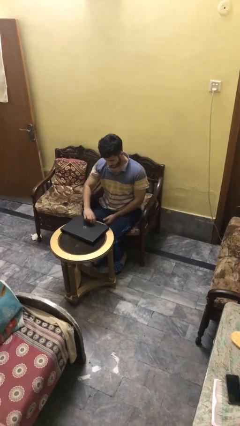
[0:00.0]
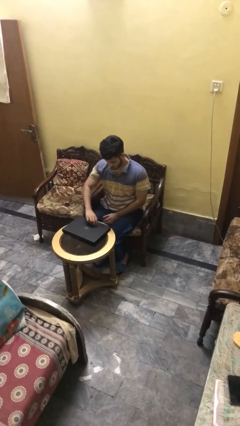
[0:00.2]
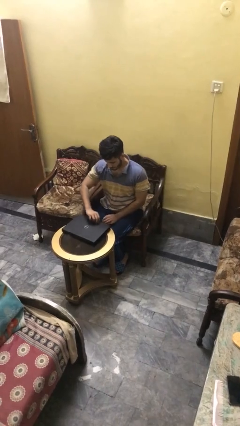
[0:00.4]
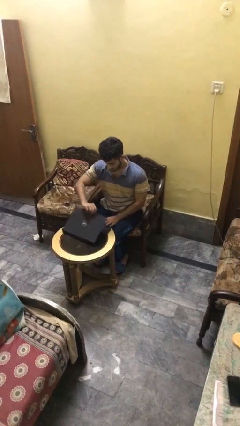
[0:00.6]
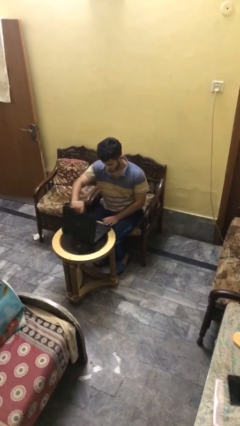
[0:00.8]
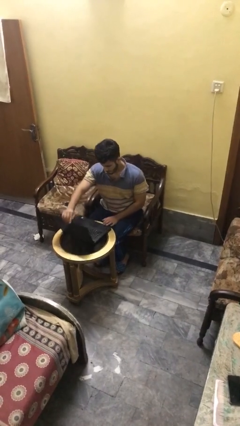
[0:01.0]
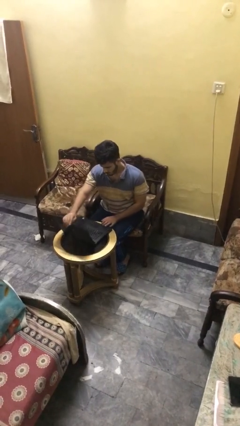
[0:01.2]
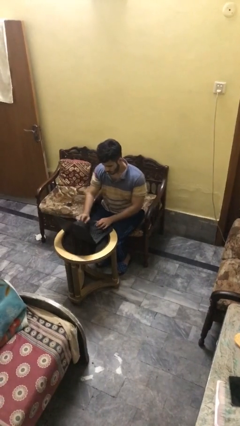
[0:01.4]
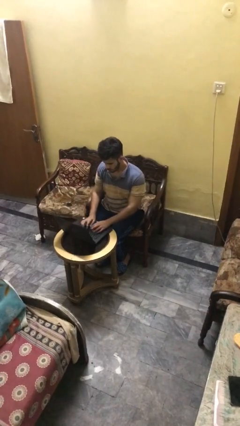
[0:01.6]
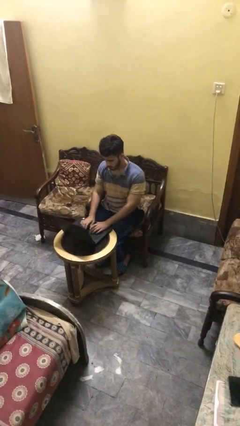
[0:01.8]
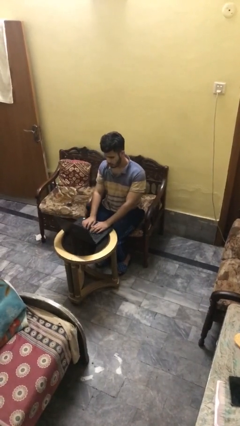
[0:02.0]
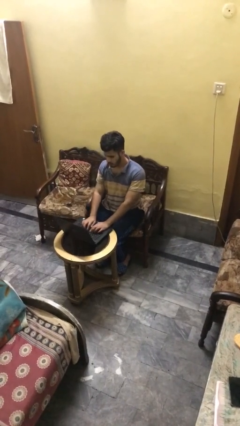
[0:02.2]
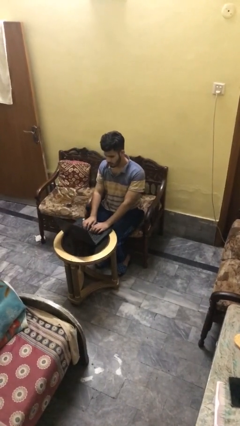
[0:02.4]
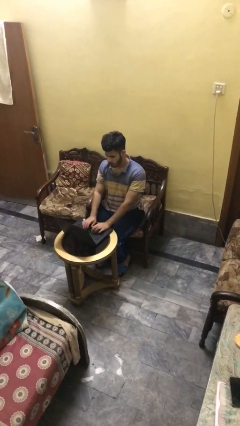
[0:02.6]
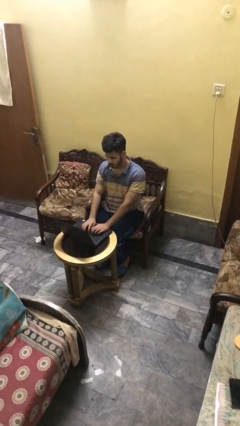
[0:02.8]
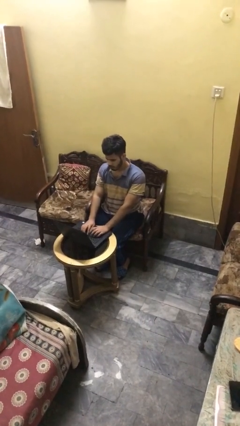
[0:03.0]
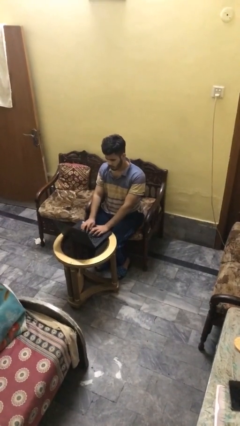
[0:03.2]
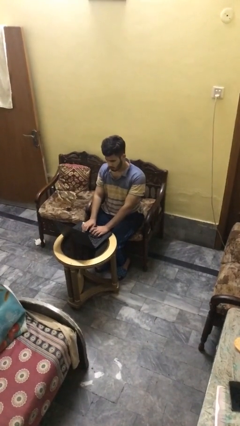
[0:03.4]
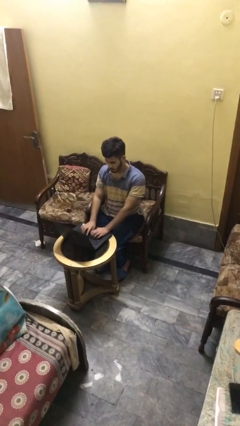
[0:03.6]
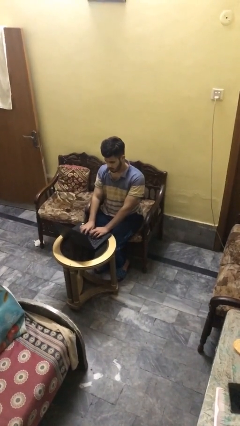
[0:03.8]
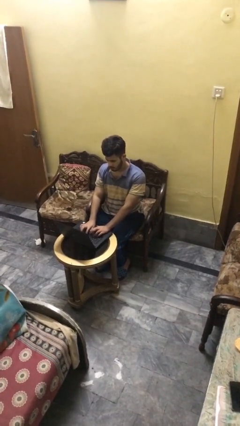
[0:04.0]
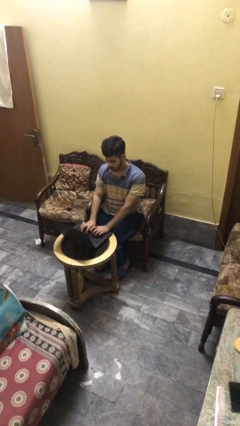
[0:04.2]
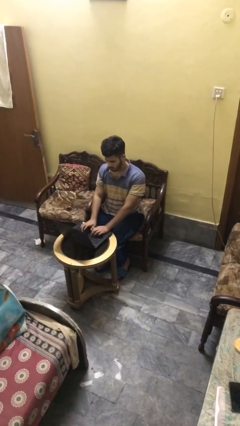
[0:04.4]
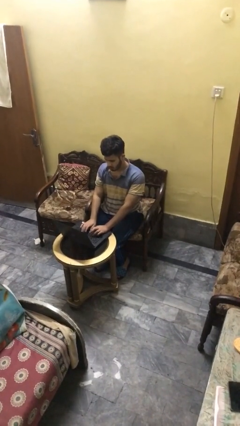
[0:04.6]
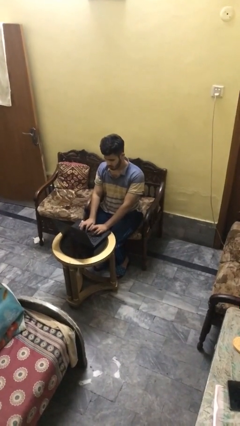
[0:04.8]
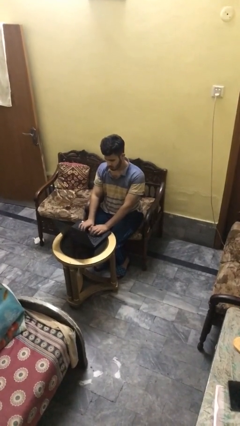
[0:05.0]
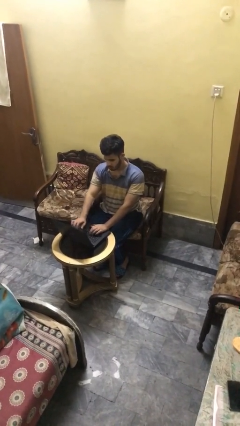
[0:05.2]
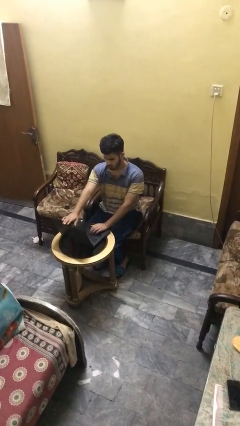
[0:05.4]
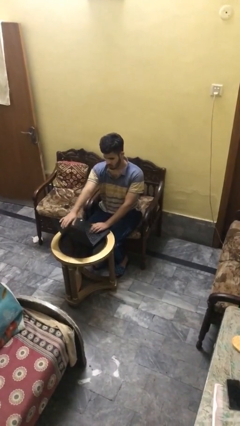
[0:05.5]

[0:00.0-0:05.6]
person interacts with laptop

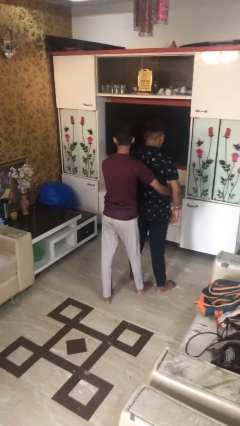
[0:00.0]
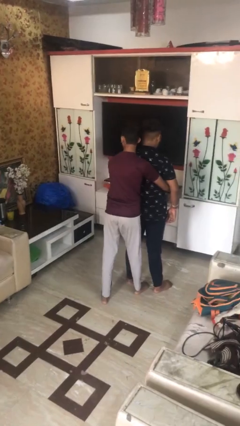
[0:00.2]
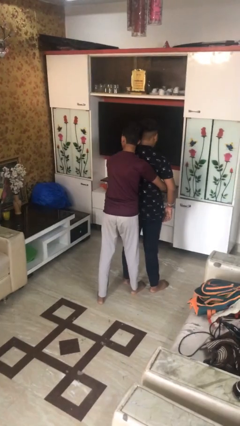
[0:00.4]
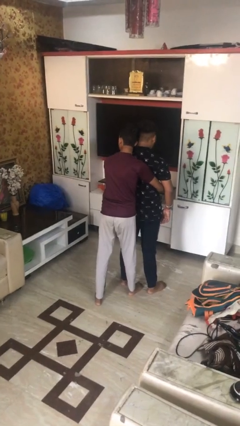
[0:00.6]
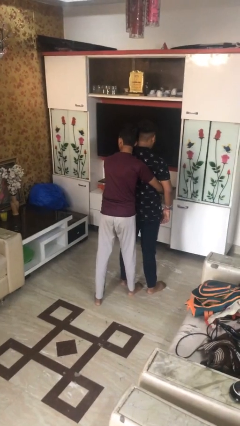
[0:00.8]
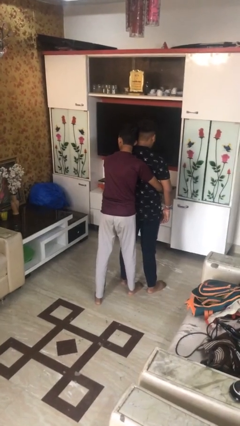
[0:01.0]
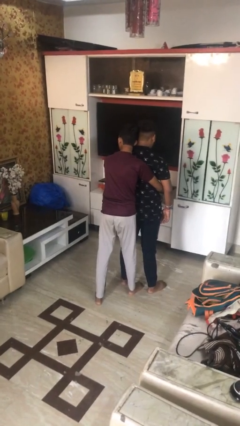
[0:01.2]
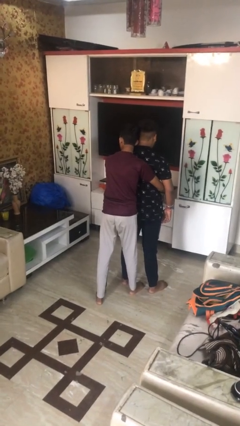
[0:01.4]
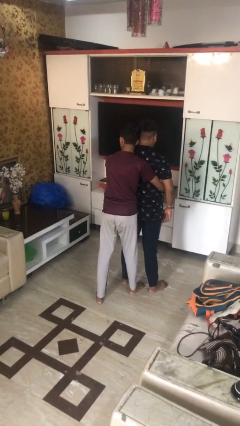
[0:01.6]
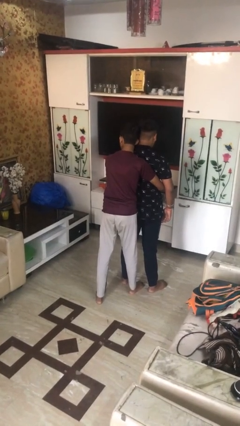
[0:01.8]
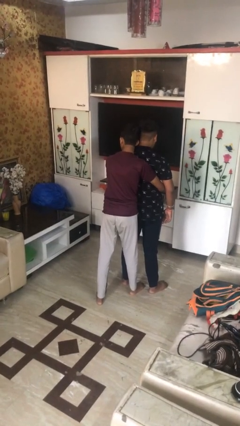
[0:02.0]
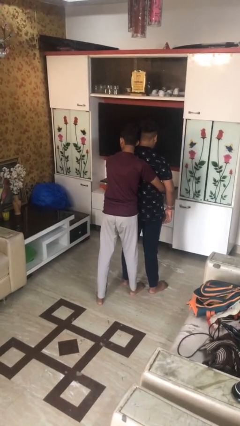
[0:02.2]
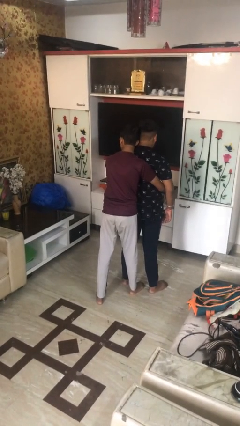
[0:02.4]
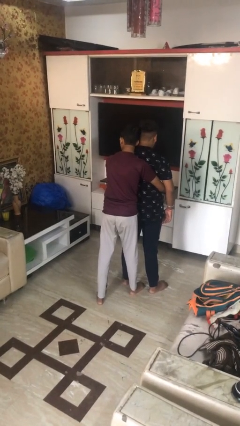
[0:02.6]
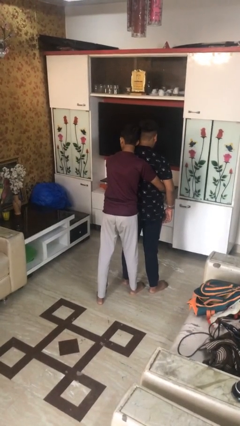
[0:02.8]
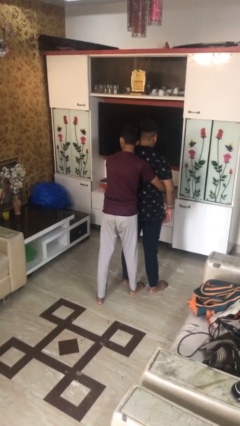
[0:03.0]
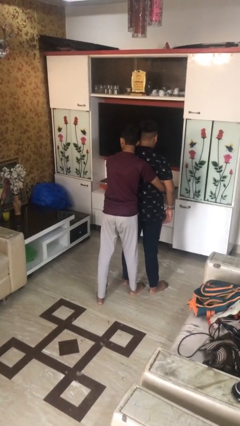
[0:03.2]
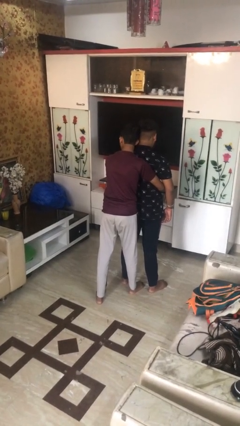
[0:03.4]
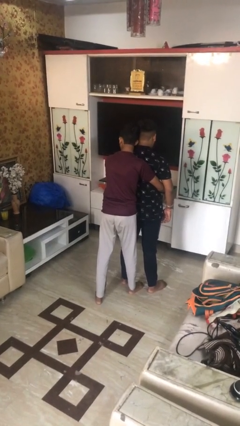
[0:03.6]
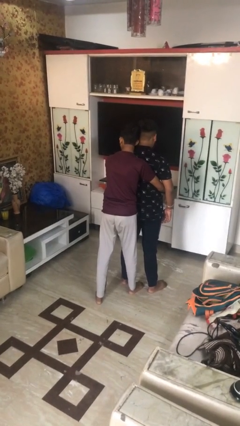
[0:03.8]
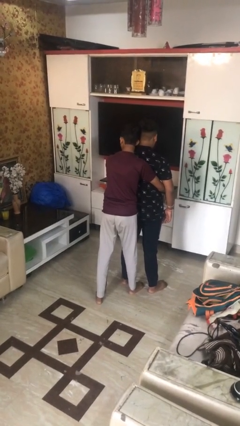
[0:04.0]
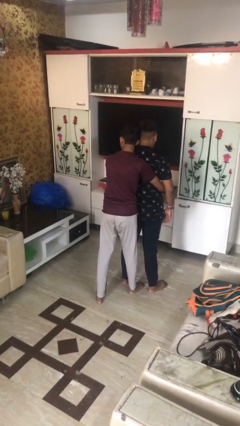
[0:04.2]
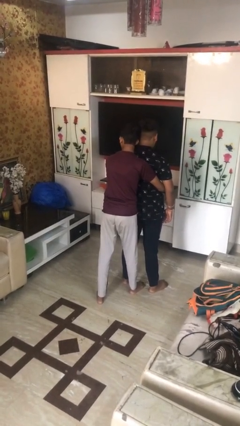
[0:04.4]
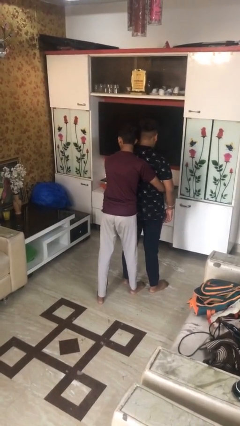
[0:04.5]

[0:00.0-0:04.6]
person hugs person from behind

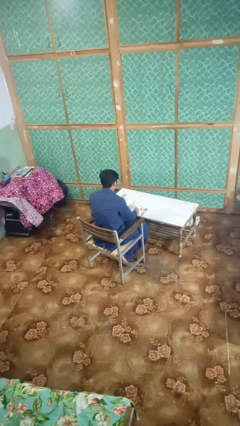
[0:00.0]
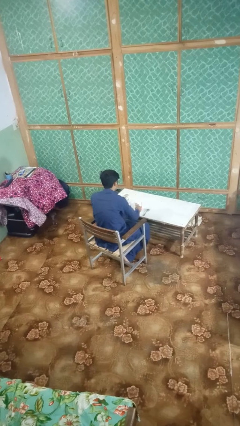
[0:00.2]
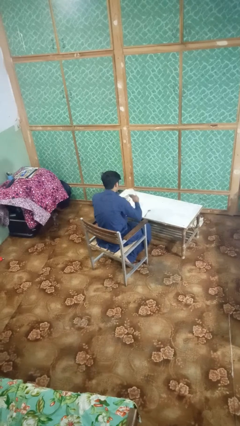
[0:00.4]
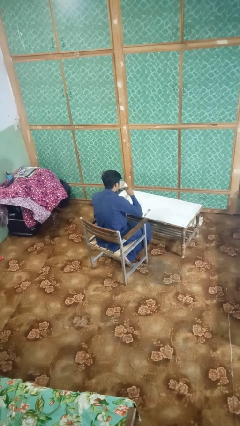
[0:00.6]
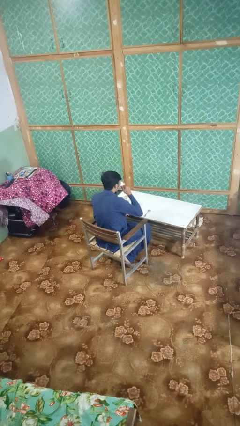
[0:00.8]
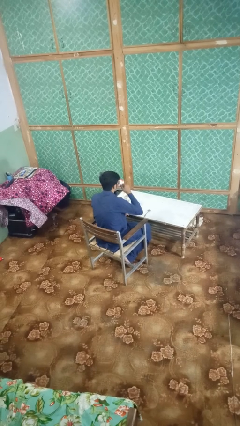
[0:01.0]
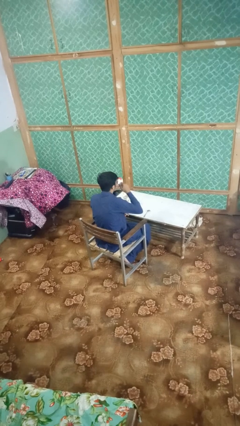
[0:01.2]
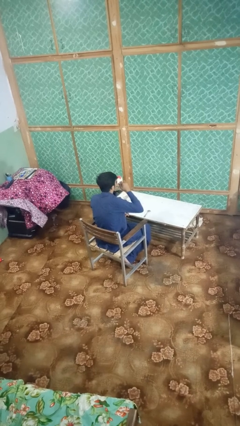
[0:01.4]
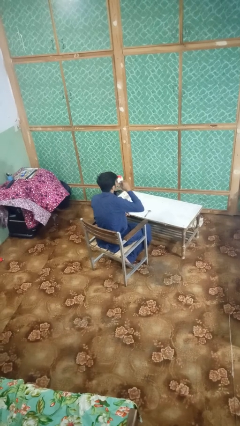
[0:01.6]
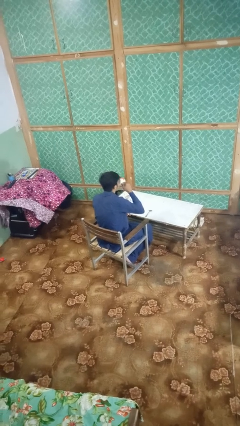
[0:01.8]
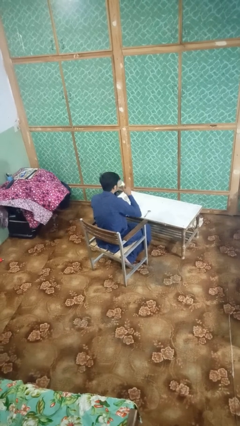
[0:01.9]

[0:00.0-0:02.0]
person drinks from mug

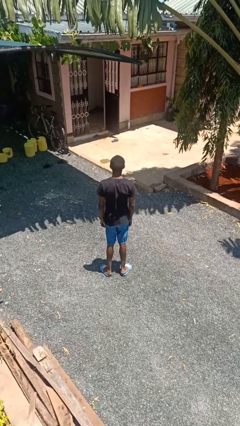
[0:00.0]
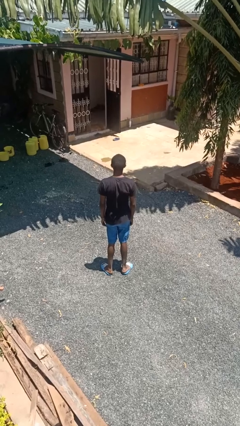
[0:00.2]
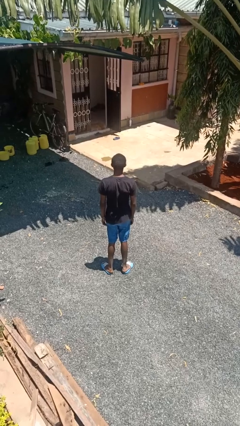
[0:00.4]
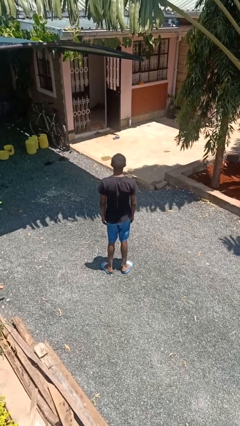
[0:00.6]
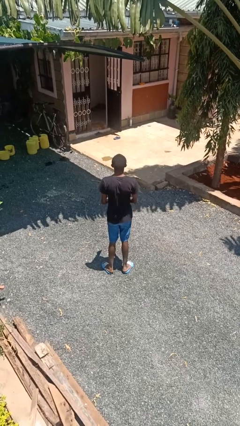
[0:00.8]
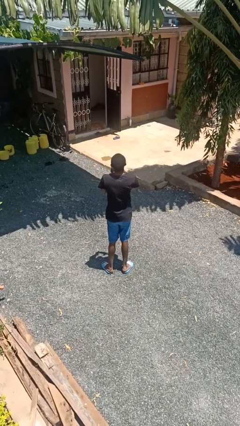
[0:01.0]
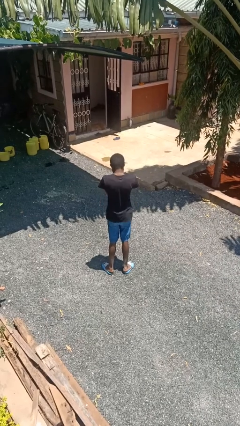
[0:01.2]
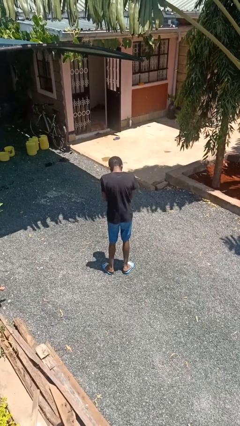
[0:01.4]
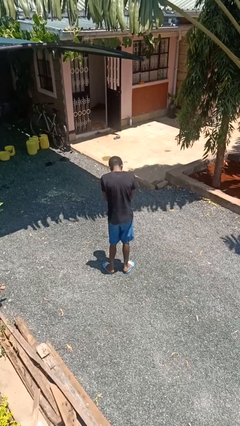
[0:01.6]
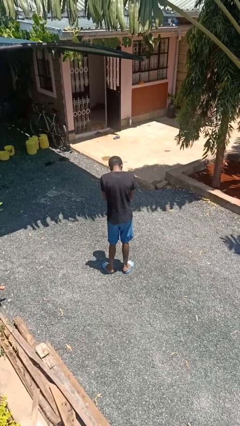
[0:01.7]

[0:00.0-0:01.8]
person sneezes into hand

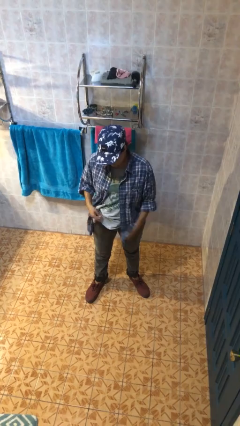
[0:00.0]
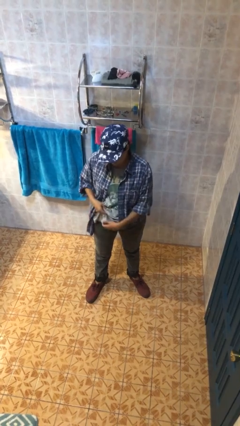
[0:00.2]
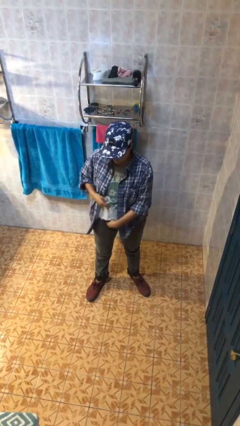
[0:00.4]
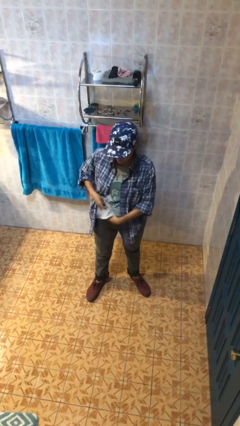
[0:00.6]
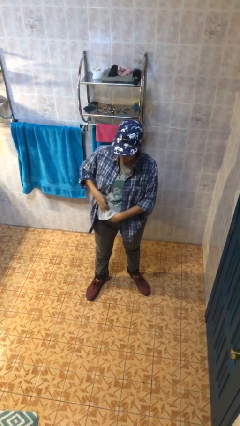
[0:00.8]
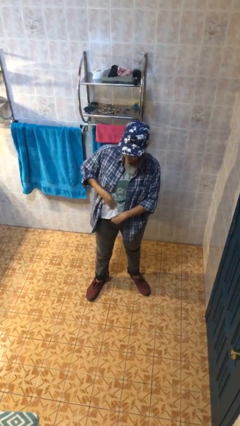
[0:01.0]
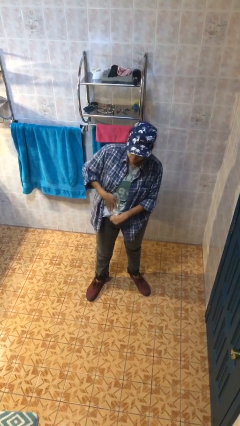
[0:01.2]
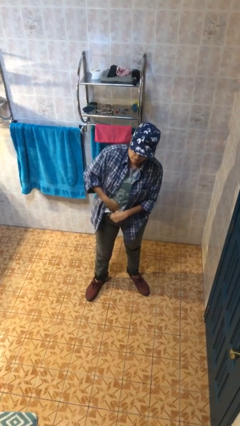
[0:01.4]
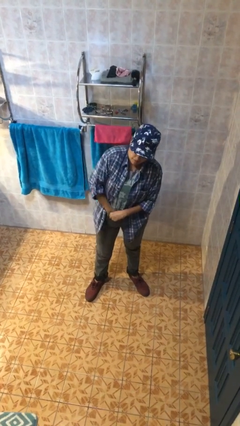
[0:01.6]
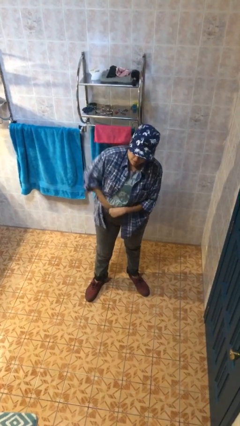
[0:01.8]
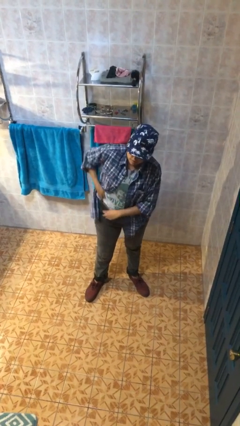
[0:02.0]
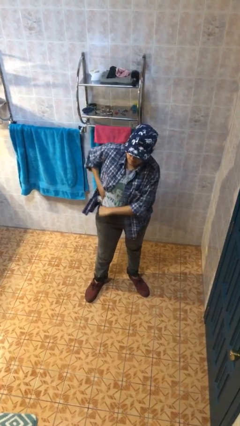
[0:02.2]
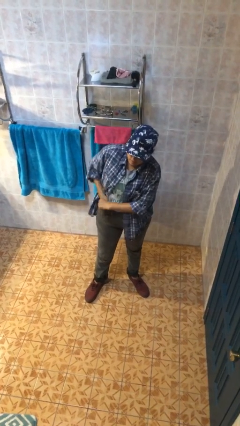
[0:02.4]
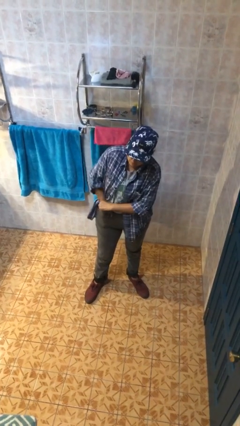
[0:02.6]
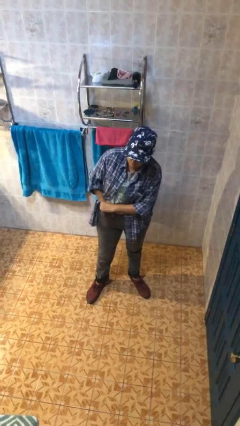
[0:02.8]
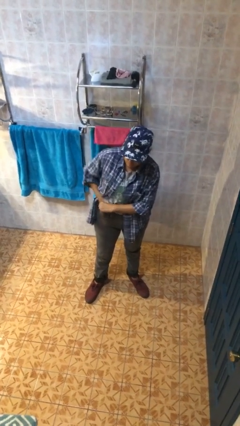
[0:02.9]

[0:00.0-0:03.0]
person tucks in shirt

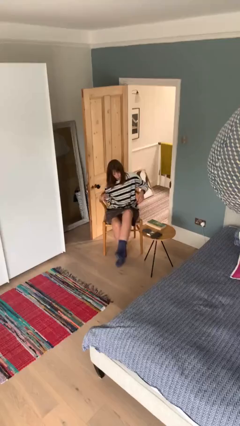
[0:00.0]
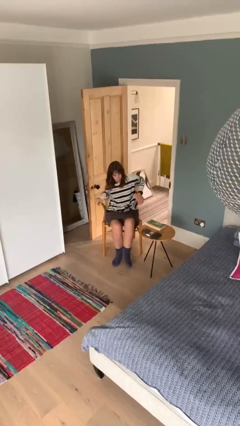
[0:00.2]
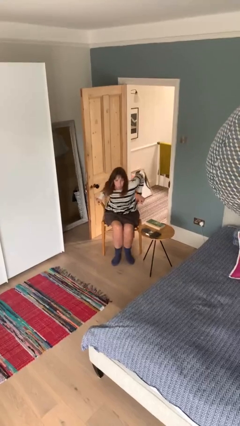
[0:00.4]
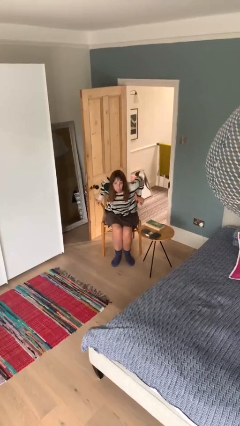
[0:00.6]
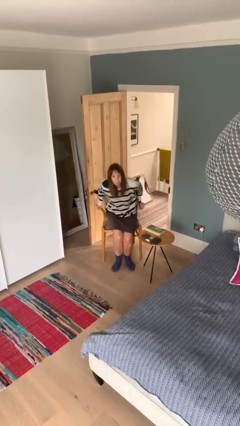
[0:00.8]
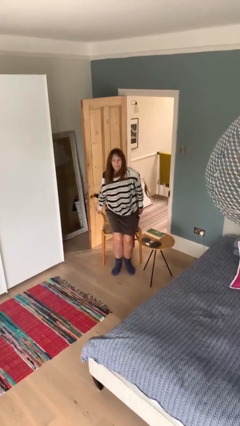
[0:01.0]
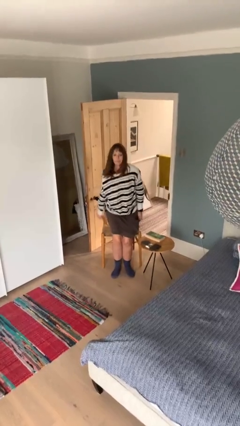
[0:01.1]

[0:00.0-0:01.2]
person stands up
